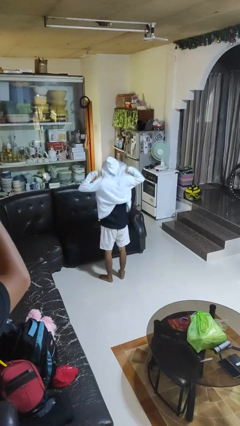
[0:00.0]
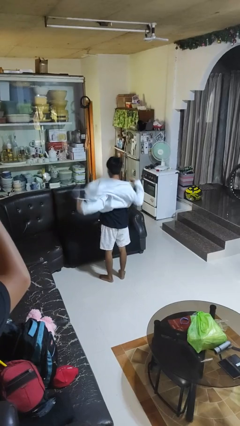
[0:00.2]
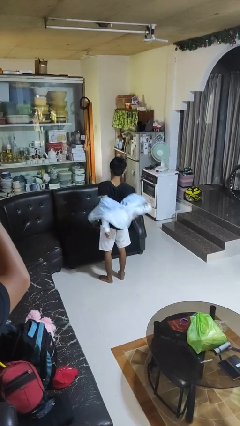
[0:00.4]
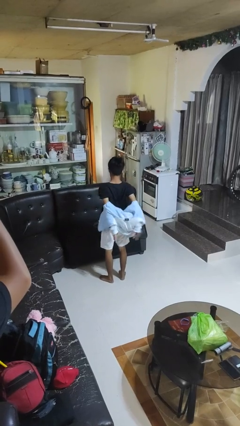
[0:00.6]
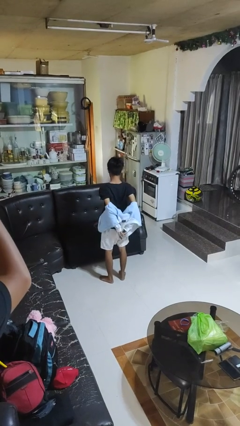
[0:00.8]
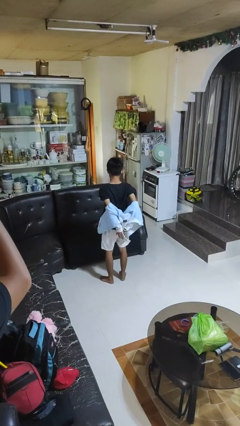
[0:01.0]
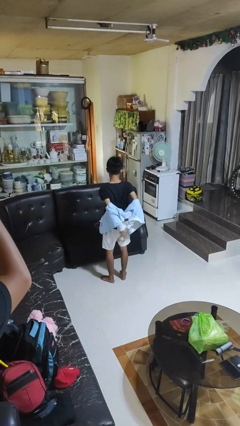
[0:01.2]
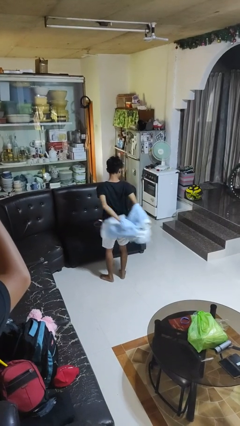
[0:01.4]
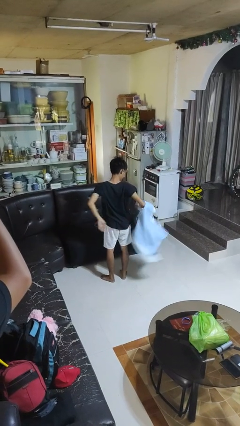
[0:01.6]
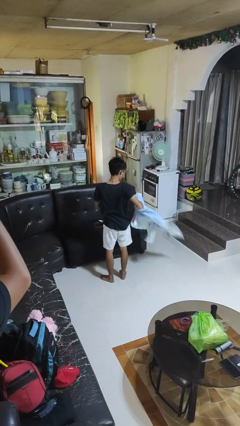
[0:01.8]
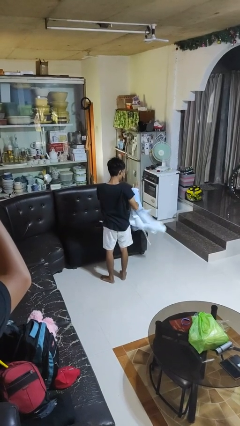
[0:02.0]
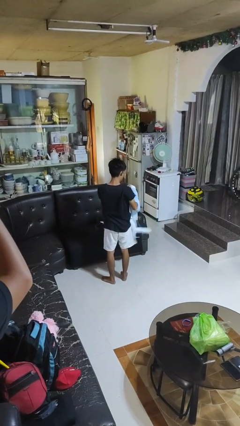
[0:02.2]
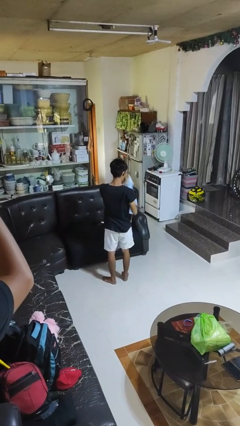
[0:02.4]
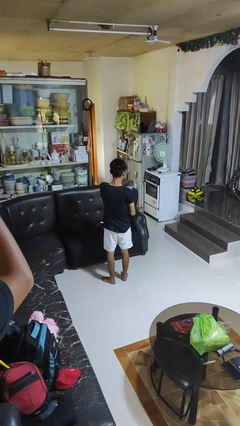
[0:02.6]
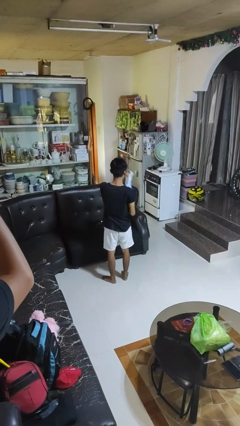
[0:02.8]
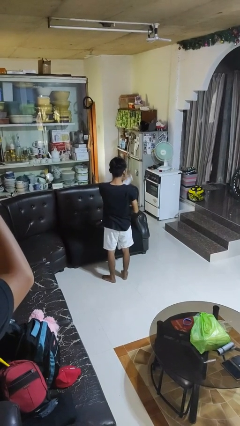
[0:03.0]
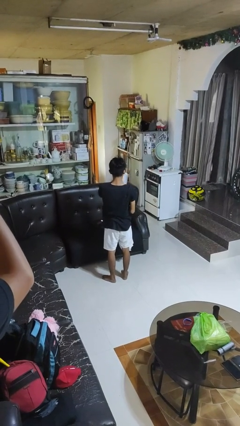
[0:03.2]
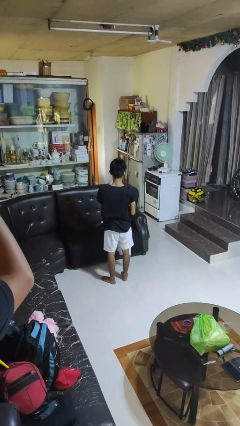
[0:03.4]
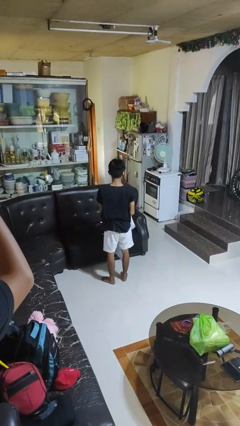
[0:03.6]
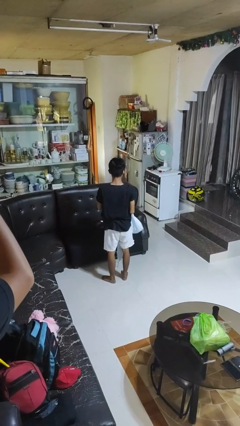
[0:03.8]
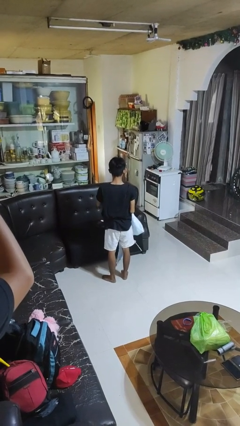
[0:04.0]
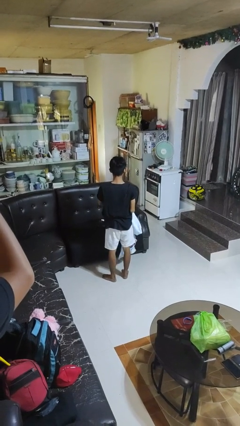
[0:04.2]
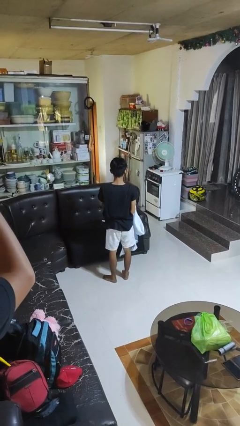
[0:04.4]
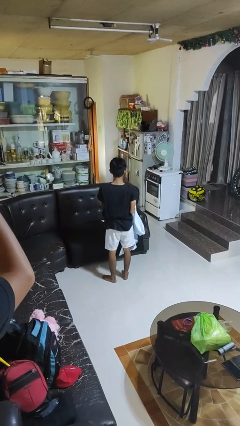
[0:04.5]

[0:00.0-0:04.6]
person takes off hoodie

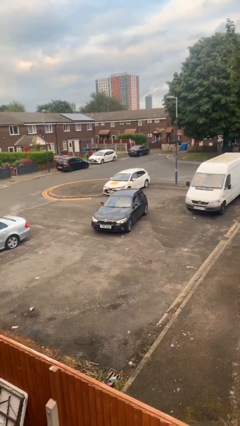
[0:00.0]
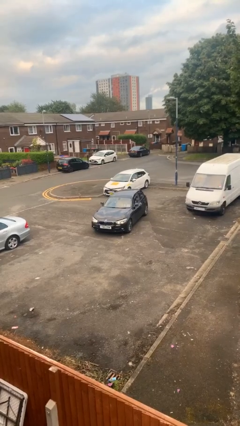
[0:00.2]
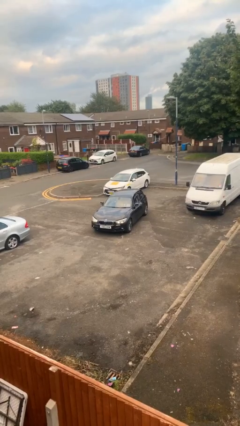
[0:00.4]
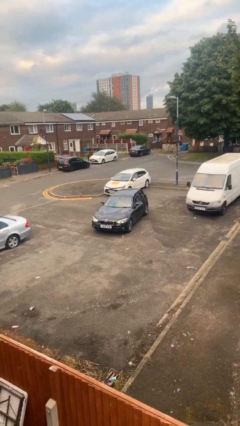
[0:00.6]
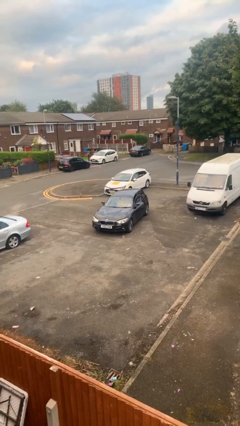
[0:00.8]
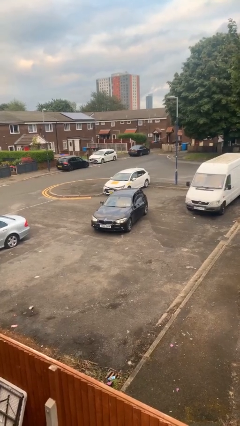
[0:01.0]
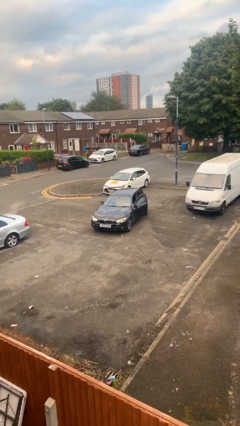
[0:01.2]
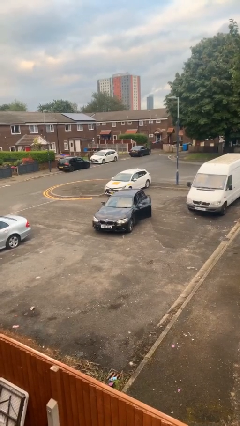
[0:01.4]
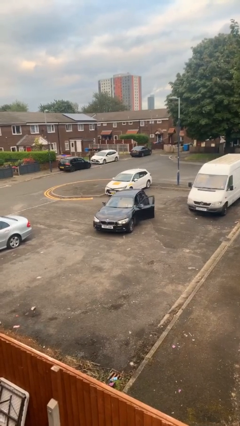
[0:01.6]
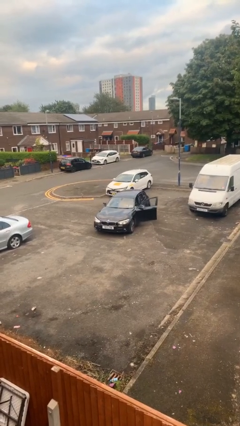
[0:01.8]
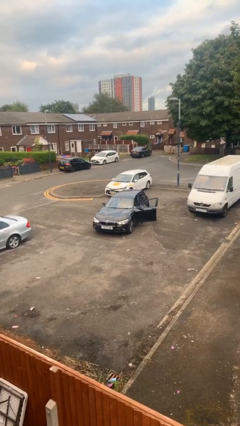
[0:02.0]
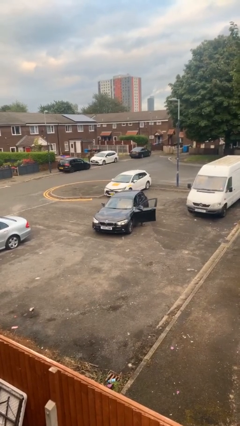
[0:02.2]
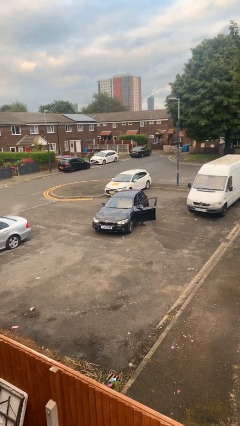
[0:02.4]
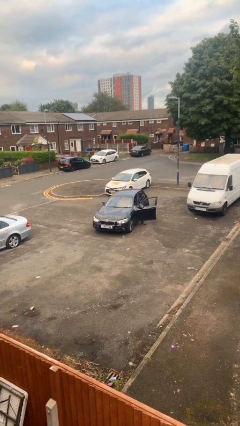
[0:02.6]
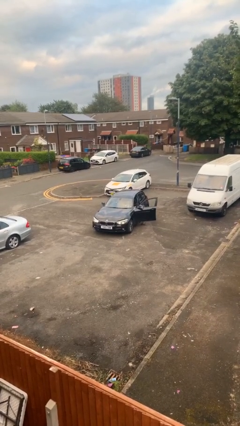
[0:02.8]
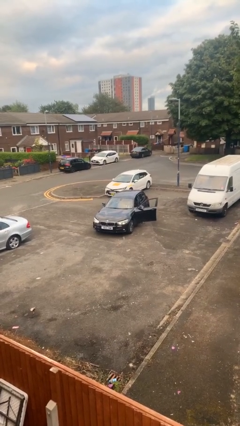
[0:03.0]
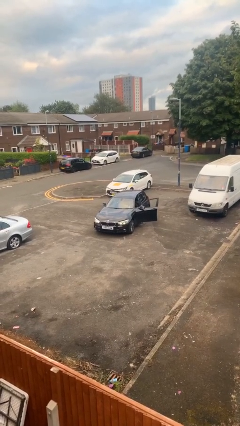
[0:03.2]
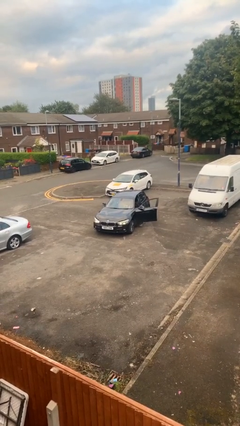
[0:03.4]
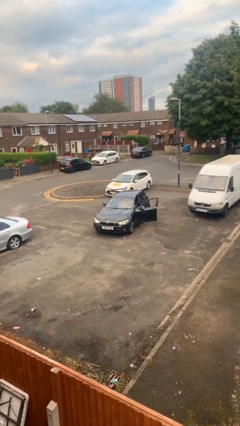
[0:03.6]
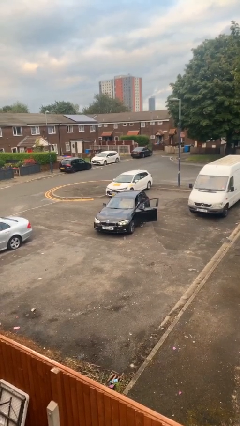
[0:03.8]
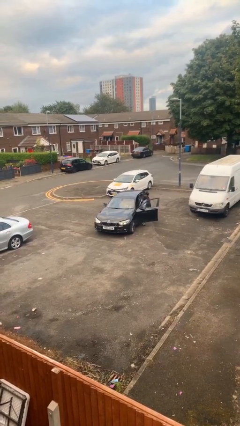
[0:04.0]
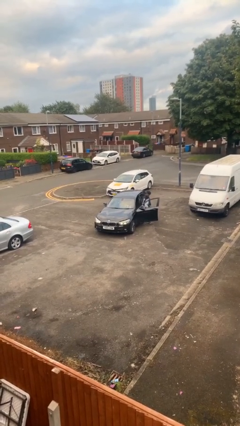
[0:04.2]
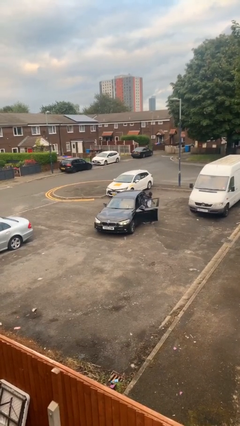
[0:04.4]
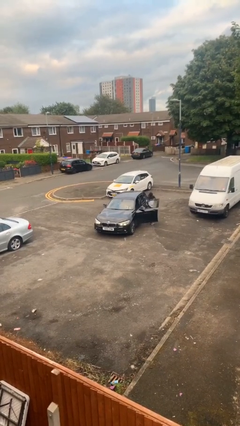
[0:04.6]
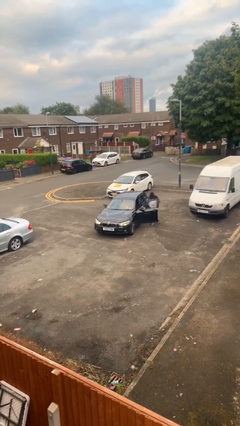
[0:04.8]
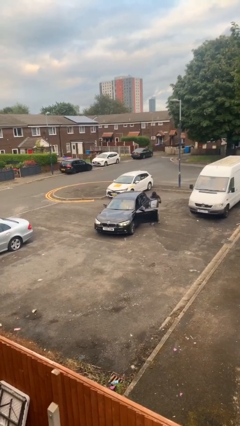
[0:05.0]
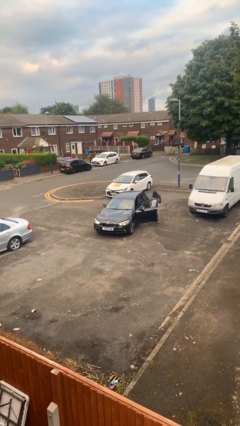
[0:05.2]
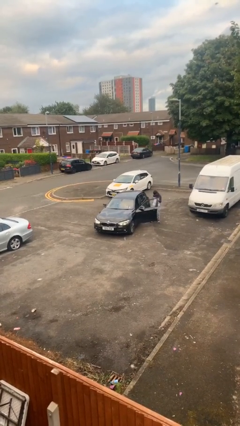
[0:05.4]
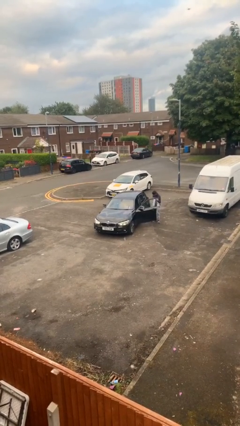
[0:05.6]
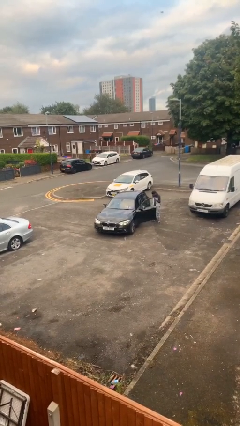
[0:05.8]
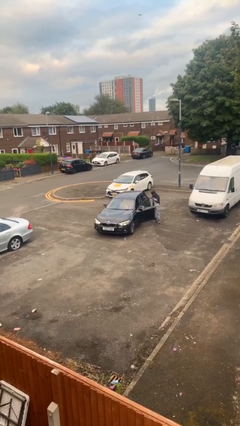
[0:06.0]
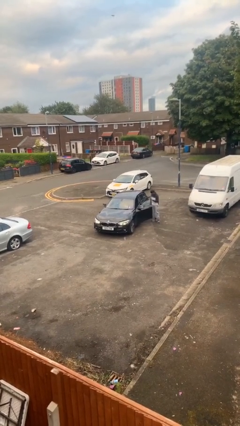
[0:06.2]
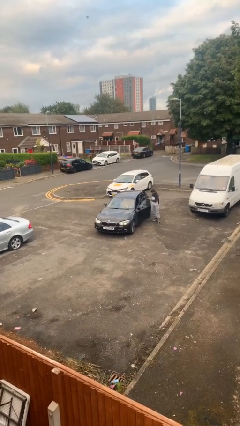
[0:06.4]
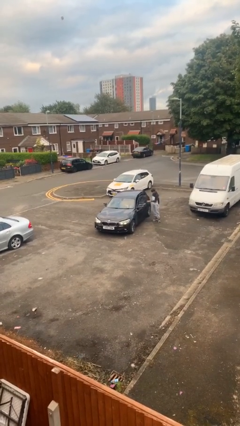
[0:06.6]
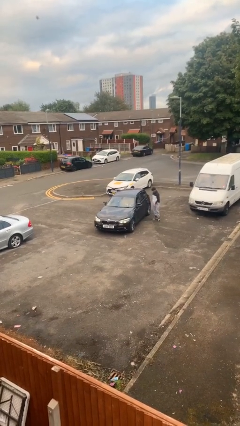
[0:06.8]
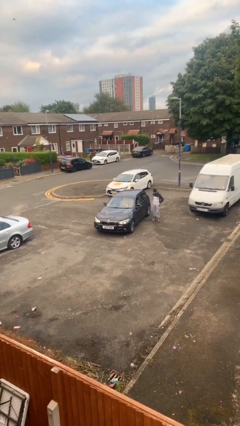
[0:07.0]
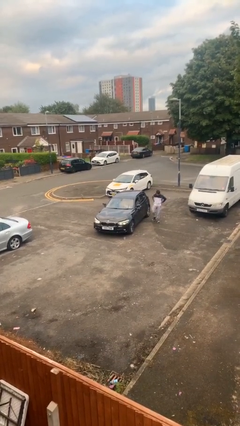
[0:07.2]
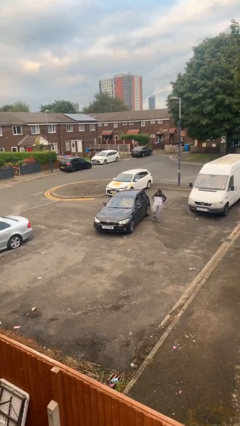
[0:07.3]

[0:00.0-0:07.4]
car drops off person

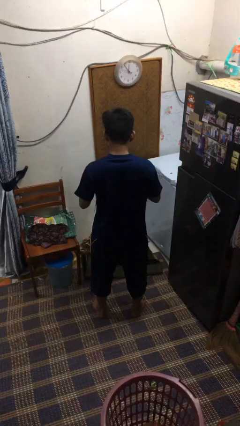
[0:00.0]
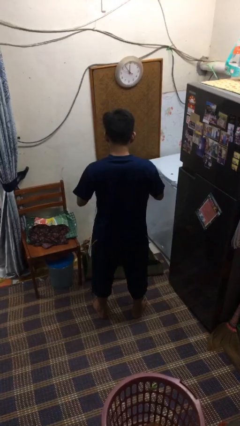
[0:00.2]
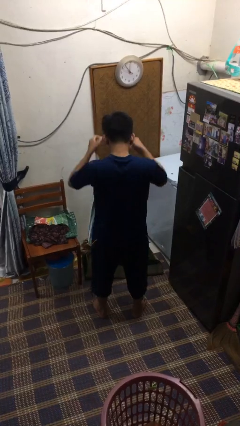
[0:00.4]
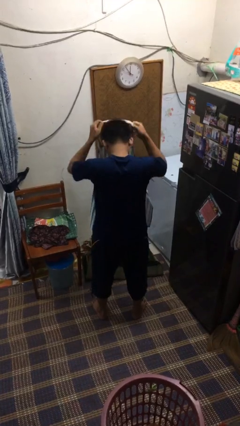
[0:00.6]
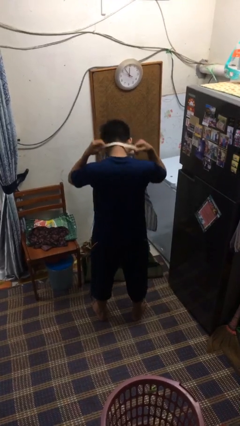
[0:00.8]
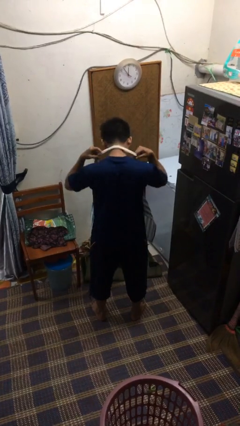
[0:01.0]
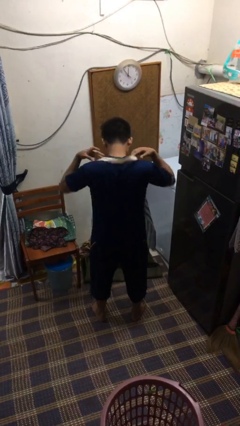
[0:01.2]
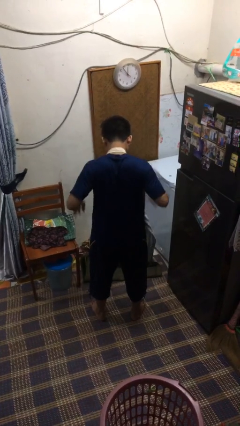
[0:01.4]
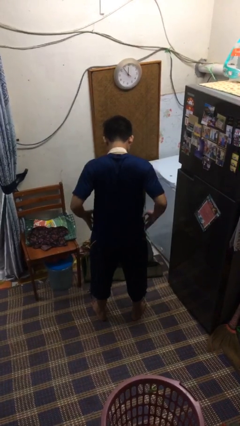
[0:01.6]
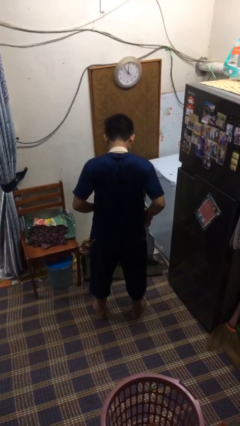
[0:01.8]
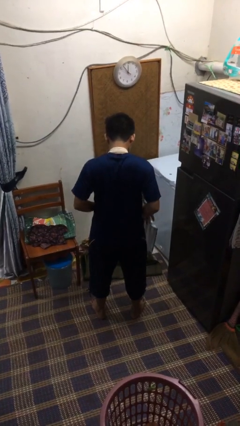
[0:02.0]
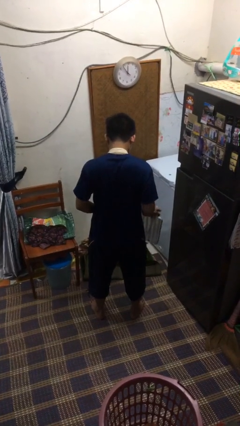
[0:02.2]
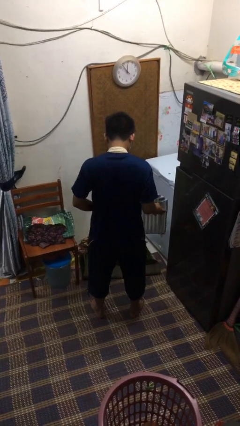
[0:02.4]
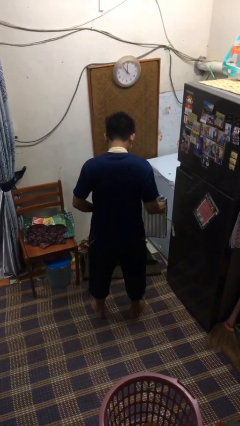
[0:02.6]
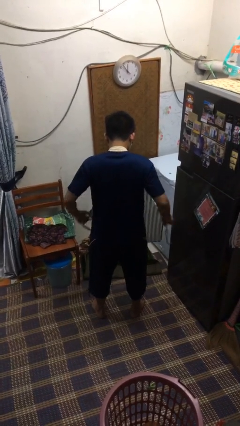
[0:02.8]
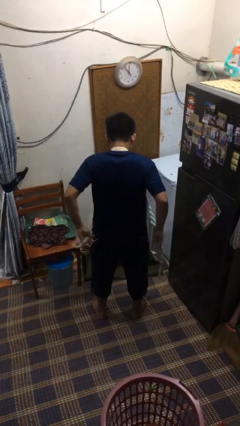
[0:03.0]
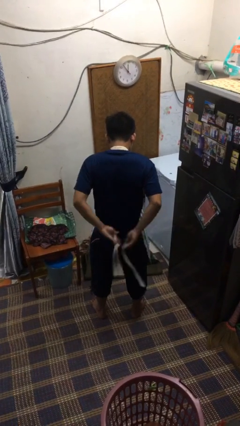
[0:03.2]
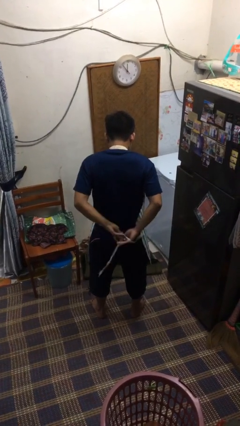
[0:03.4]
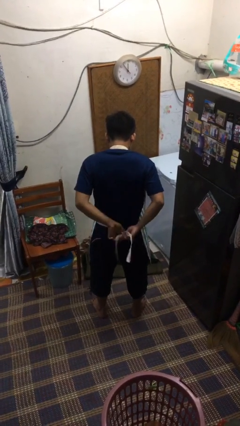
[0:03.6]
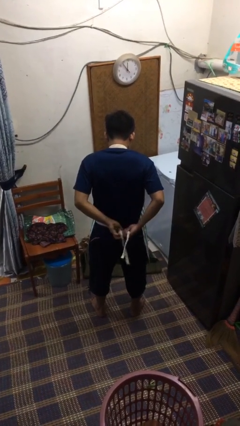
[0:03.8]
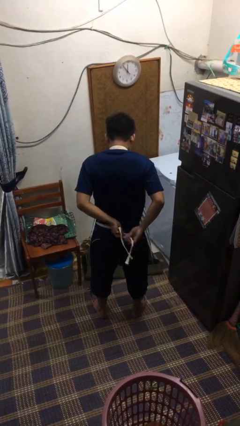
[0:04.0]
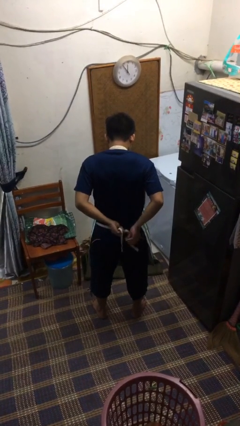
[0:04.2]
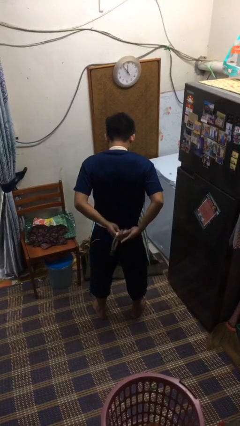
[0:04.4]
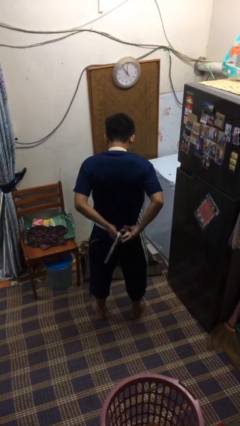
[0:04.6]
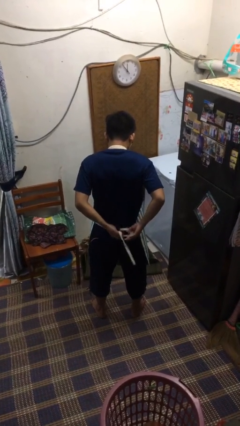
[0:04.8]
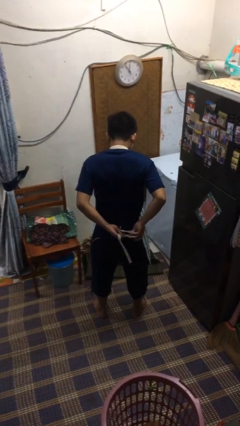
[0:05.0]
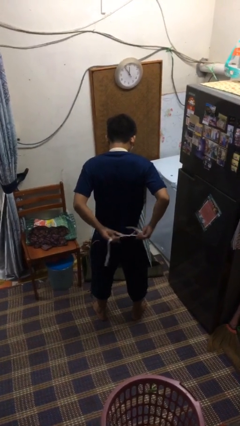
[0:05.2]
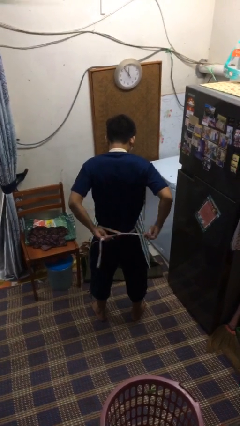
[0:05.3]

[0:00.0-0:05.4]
person puts on apron

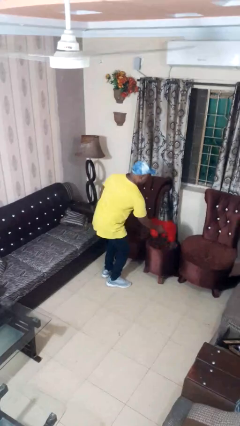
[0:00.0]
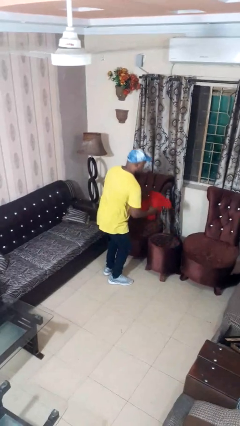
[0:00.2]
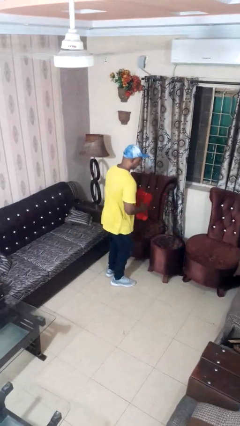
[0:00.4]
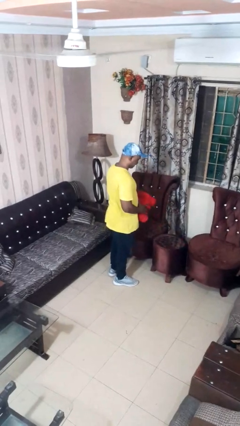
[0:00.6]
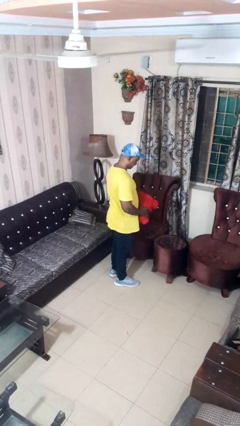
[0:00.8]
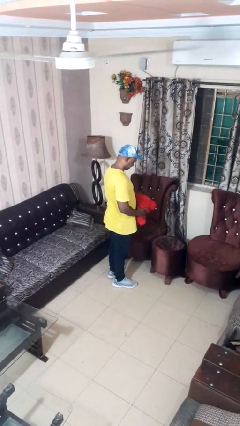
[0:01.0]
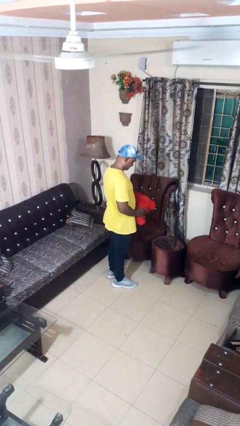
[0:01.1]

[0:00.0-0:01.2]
person picks up object from table
